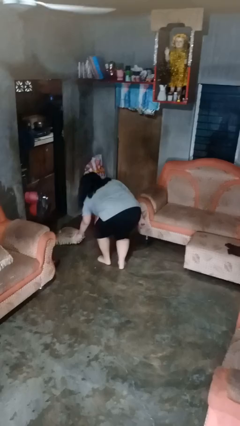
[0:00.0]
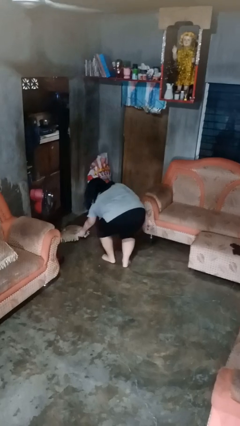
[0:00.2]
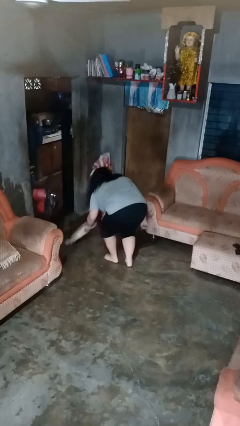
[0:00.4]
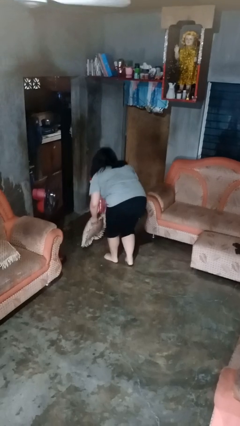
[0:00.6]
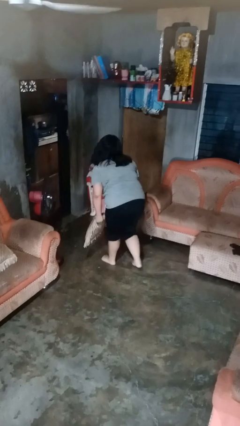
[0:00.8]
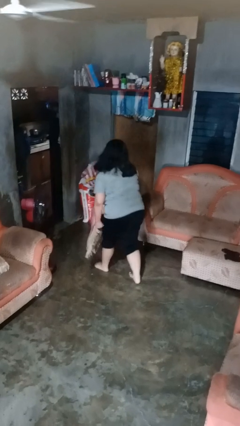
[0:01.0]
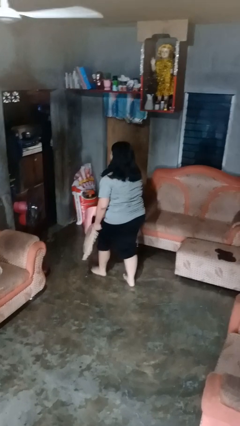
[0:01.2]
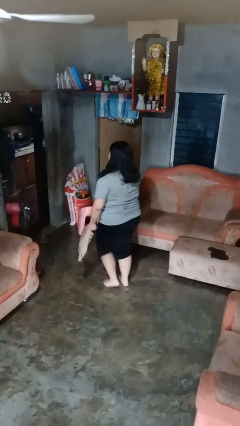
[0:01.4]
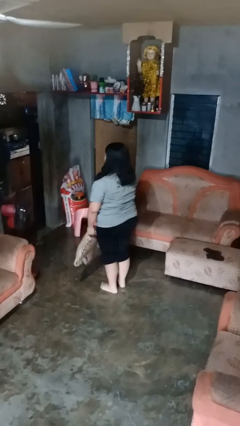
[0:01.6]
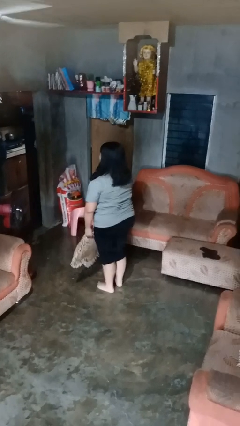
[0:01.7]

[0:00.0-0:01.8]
person picks up object from floor

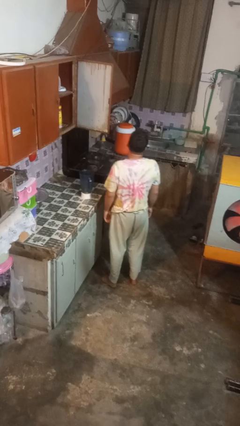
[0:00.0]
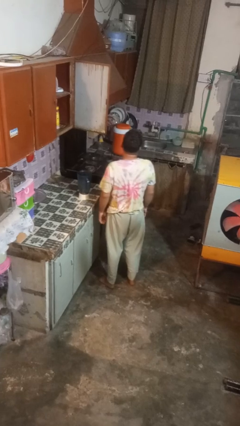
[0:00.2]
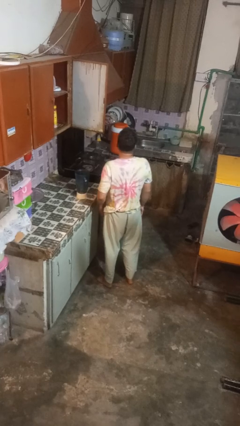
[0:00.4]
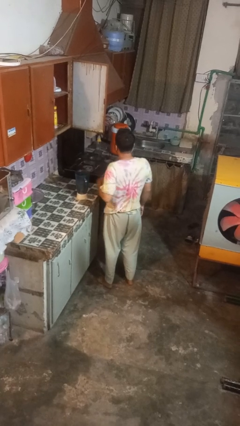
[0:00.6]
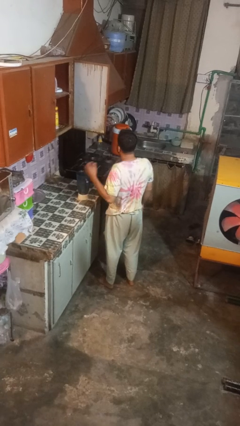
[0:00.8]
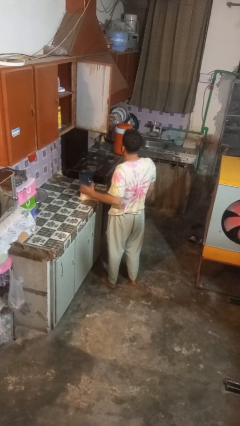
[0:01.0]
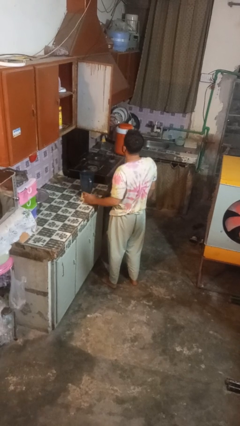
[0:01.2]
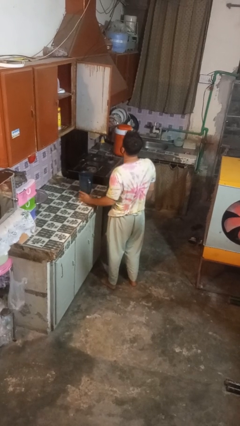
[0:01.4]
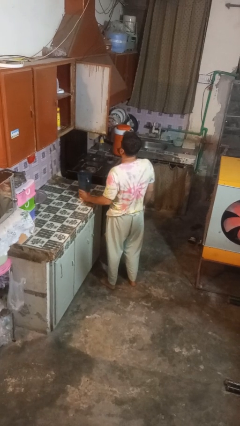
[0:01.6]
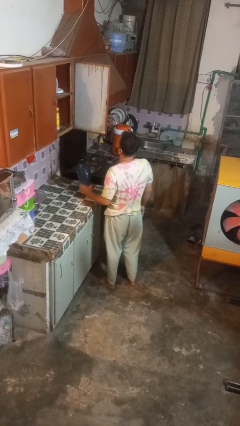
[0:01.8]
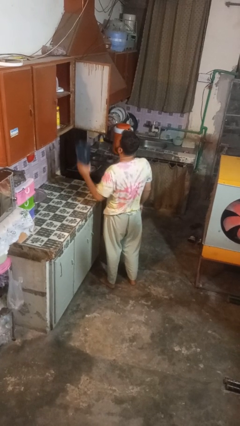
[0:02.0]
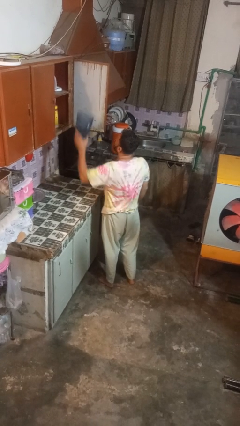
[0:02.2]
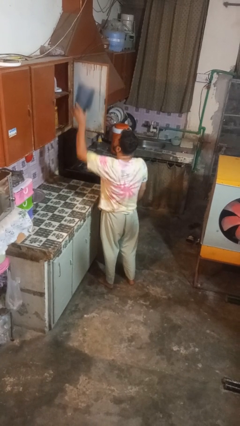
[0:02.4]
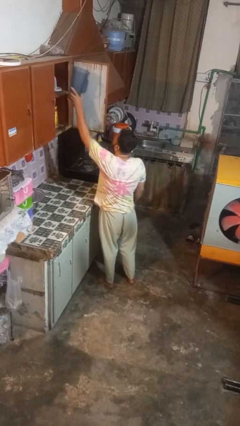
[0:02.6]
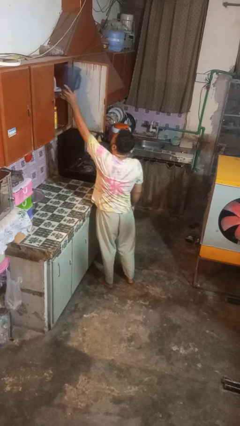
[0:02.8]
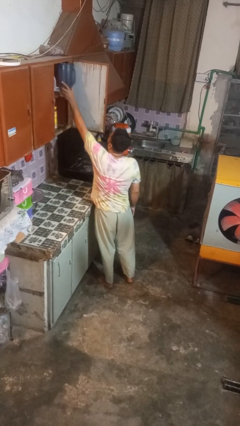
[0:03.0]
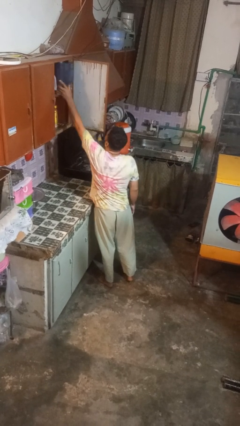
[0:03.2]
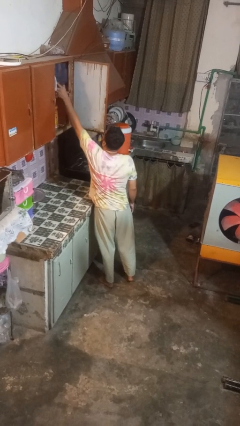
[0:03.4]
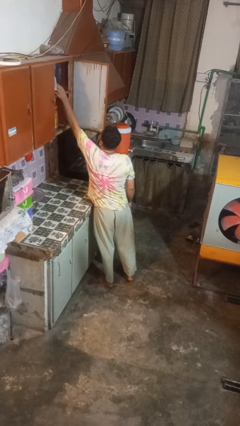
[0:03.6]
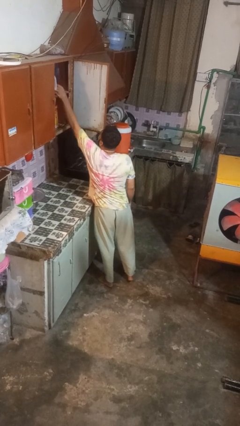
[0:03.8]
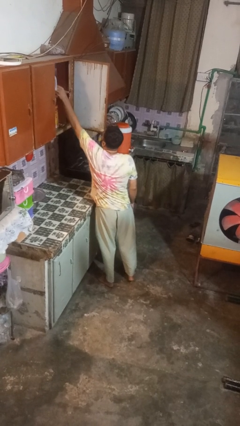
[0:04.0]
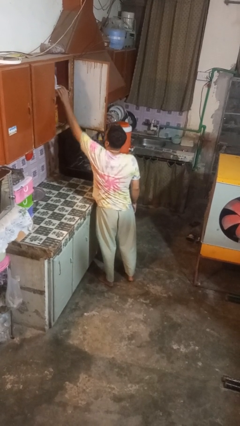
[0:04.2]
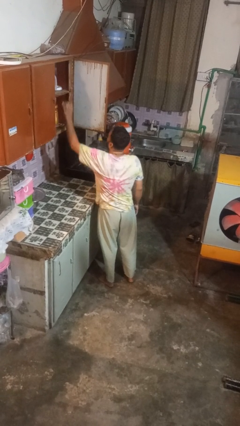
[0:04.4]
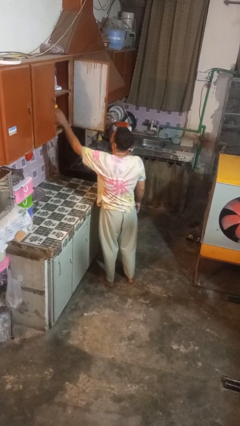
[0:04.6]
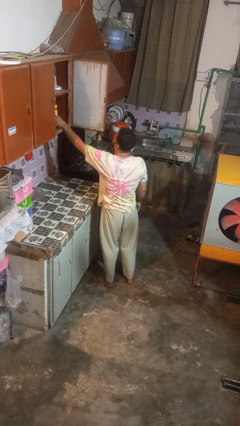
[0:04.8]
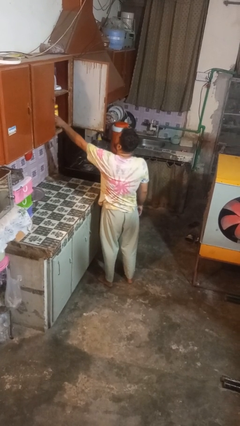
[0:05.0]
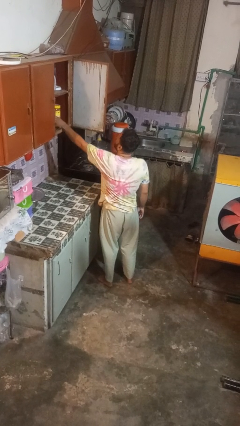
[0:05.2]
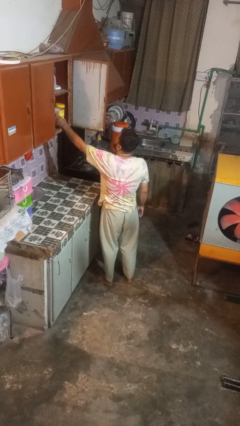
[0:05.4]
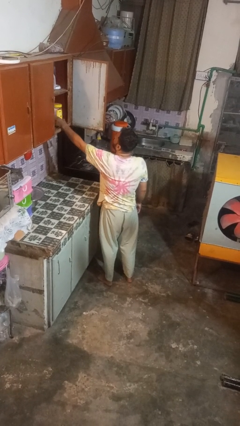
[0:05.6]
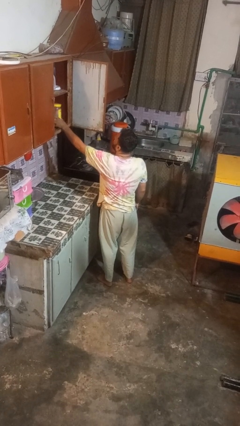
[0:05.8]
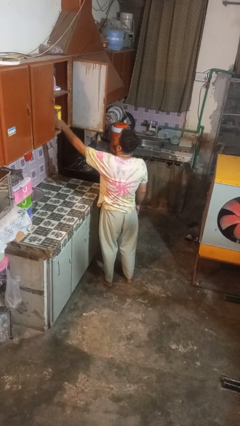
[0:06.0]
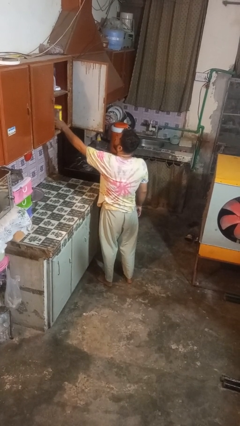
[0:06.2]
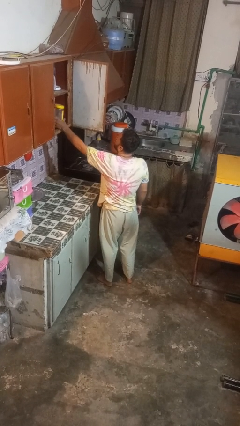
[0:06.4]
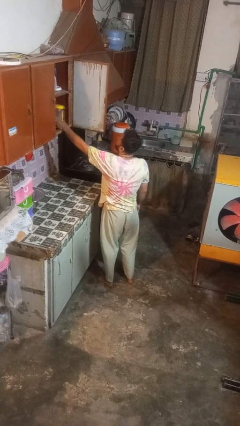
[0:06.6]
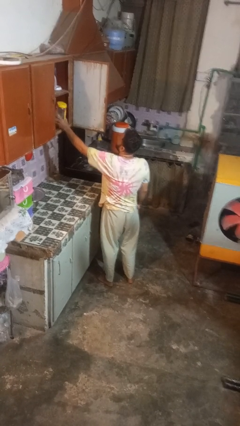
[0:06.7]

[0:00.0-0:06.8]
person puts object in cabinet

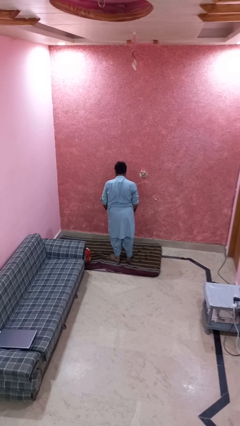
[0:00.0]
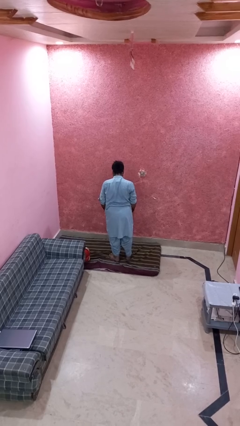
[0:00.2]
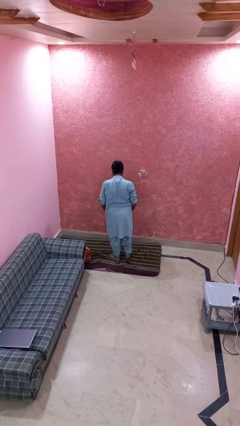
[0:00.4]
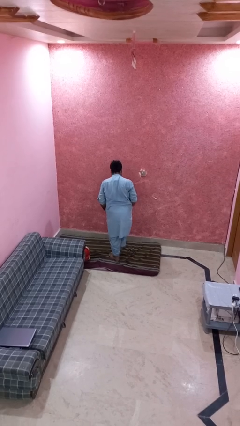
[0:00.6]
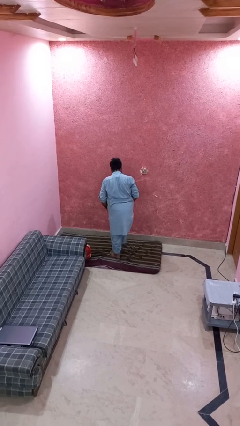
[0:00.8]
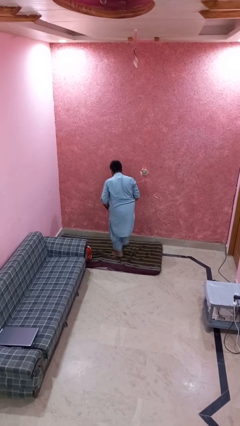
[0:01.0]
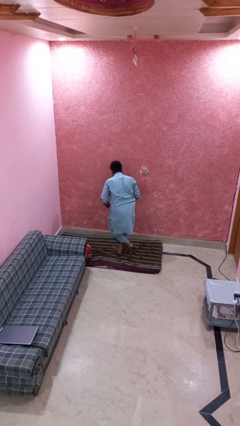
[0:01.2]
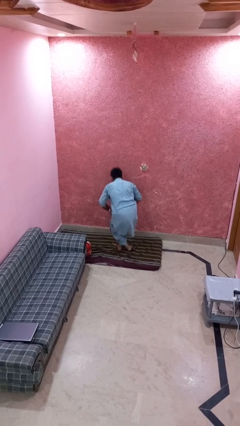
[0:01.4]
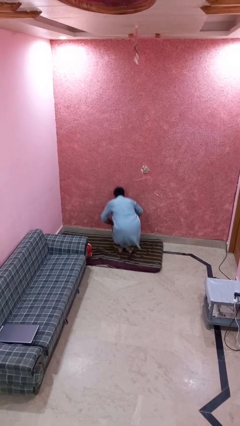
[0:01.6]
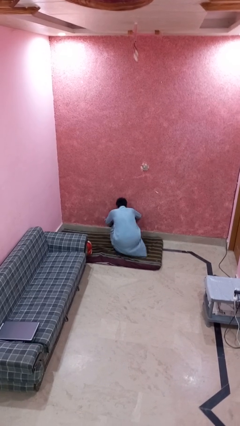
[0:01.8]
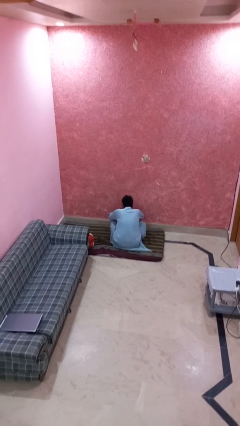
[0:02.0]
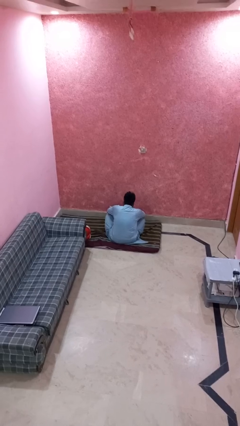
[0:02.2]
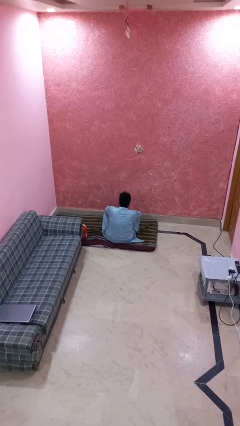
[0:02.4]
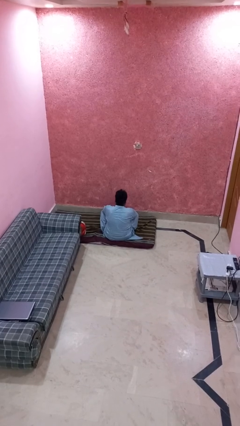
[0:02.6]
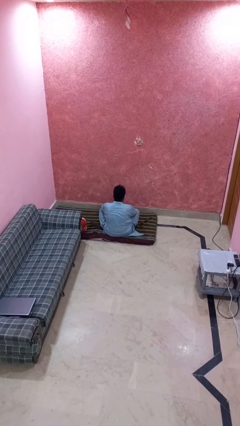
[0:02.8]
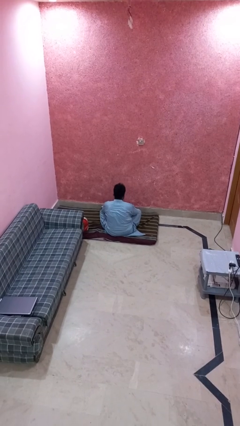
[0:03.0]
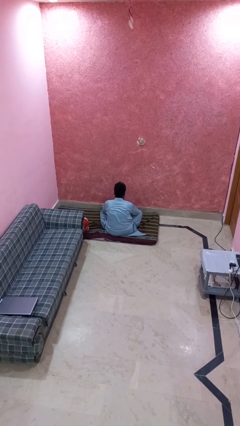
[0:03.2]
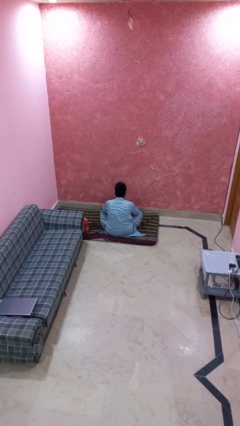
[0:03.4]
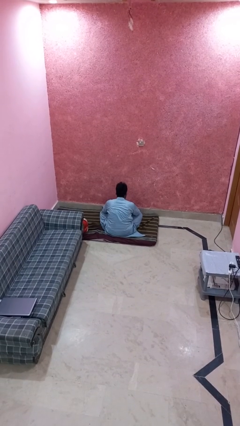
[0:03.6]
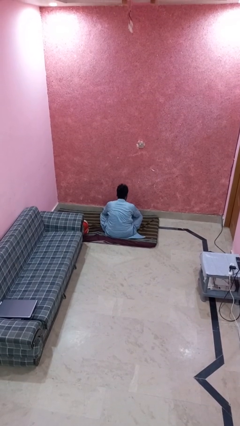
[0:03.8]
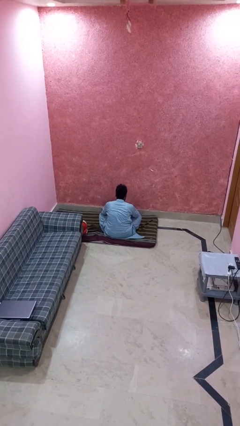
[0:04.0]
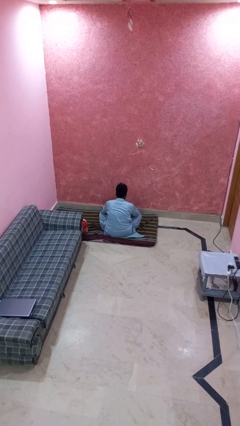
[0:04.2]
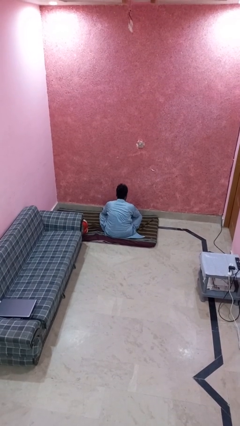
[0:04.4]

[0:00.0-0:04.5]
person sits crisscross

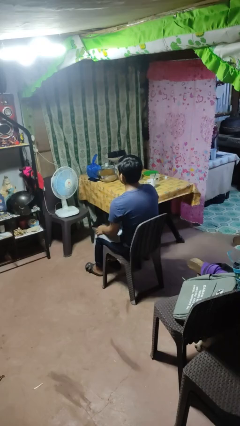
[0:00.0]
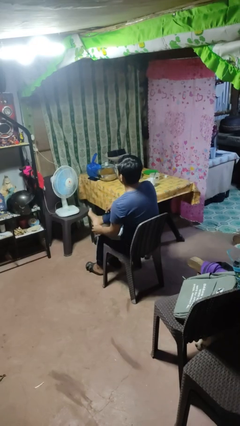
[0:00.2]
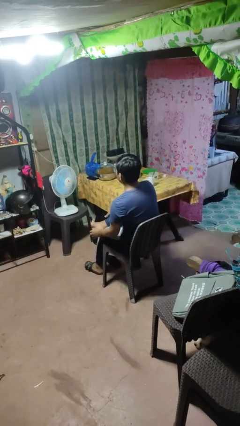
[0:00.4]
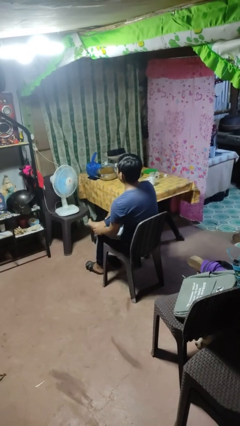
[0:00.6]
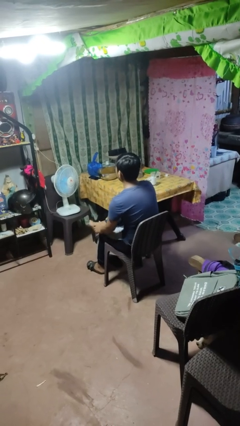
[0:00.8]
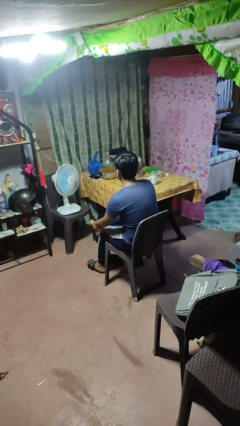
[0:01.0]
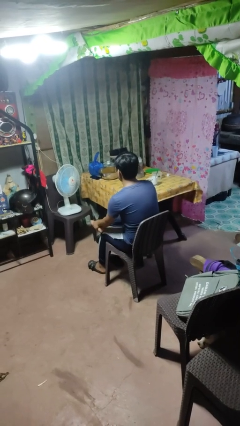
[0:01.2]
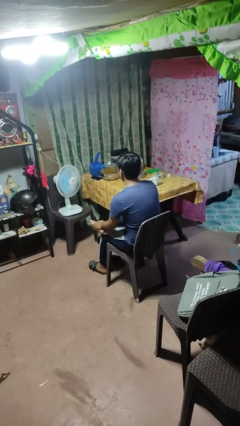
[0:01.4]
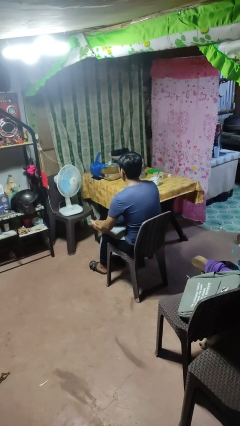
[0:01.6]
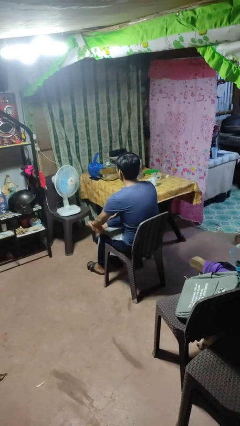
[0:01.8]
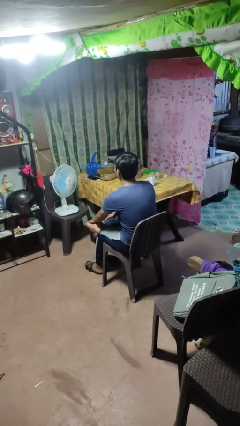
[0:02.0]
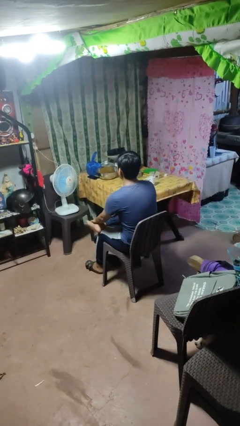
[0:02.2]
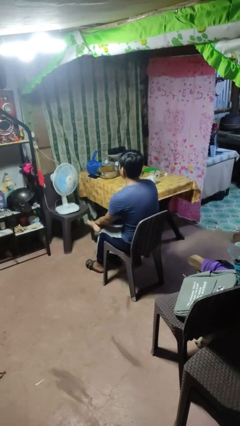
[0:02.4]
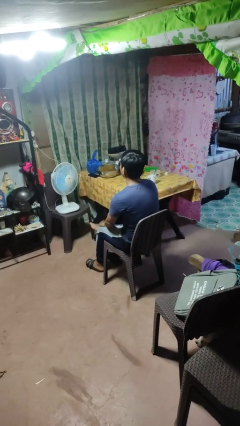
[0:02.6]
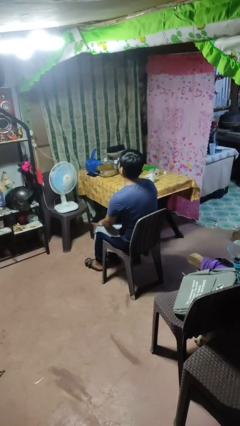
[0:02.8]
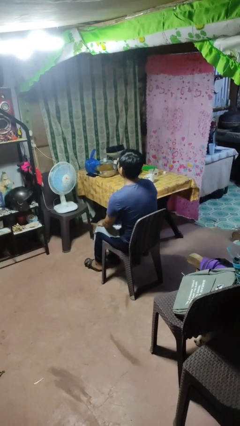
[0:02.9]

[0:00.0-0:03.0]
person rubs foot

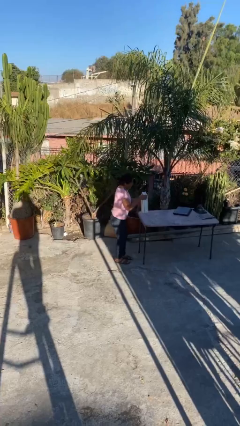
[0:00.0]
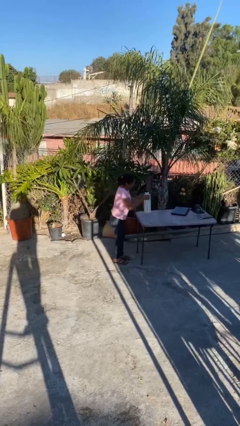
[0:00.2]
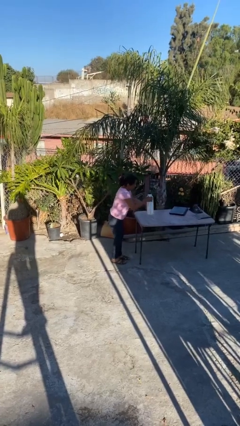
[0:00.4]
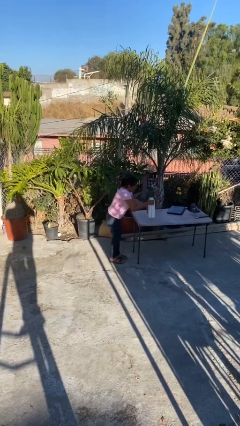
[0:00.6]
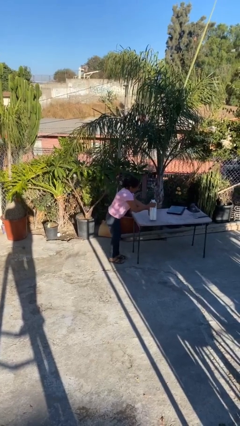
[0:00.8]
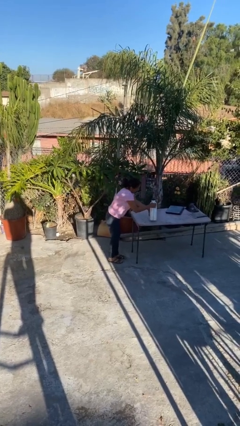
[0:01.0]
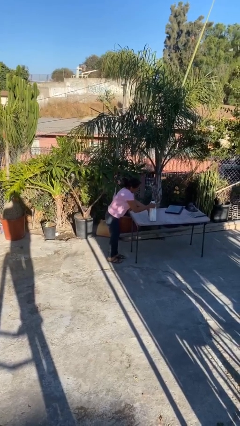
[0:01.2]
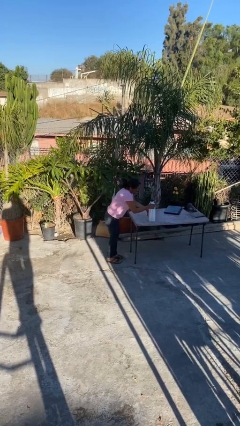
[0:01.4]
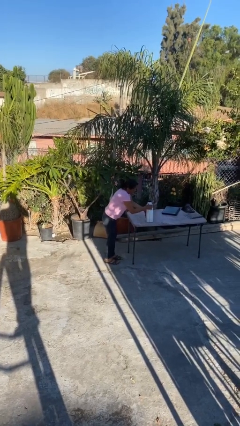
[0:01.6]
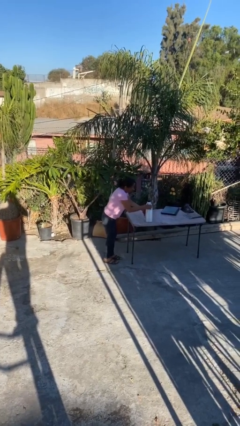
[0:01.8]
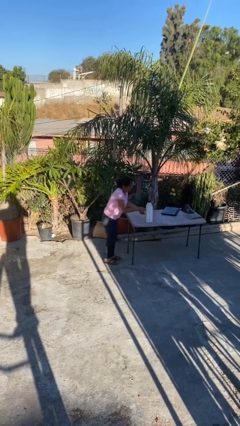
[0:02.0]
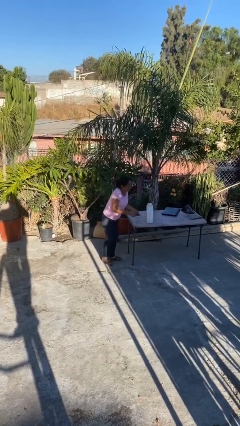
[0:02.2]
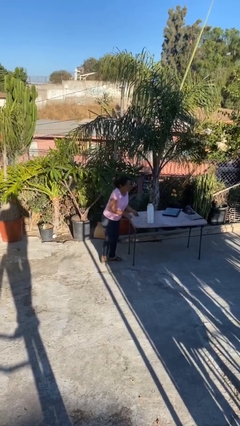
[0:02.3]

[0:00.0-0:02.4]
person puts down object on table
